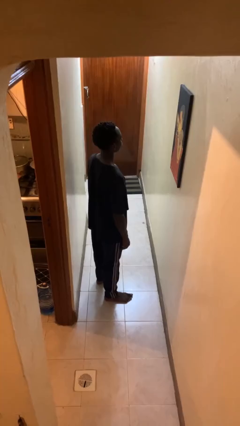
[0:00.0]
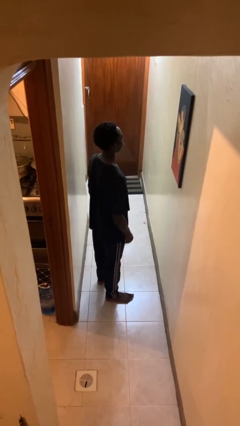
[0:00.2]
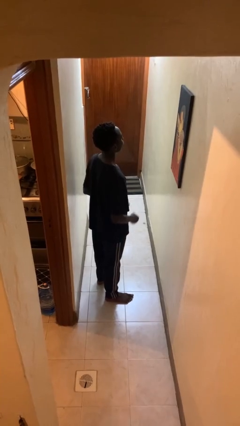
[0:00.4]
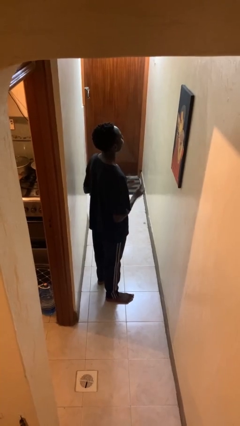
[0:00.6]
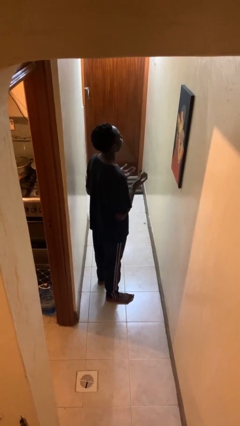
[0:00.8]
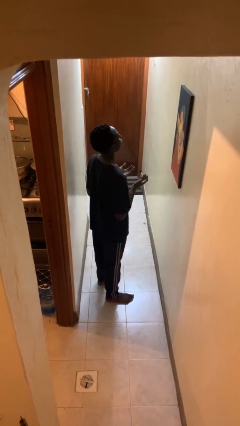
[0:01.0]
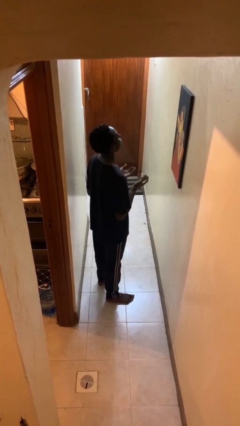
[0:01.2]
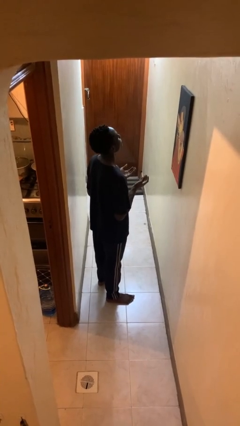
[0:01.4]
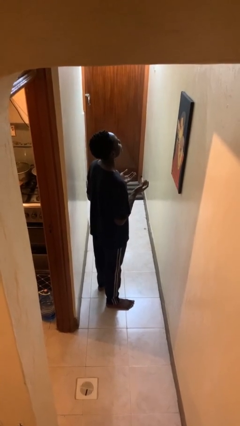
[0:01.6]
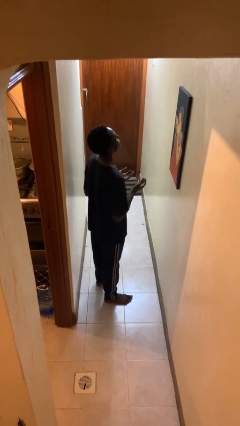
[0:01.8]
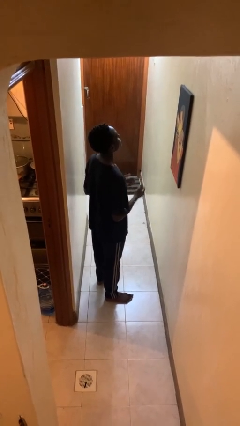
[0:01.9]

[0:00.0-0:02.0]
person prays

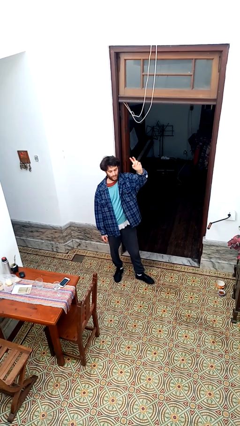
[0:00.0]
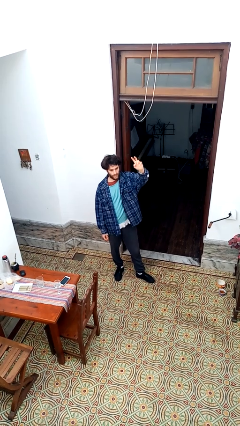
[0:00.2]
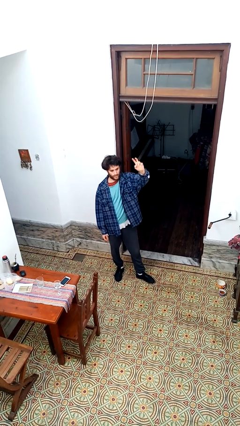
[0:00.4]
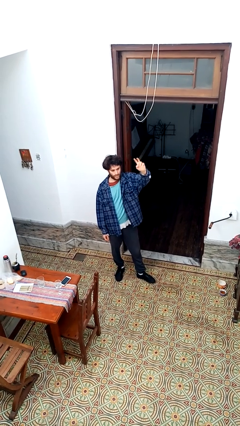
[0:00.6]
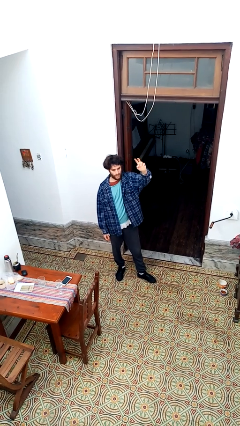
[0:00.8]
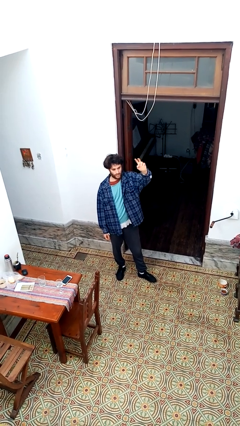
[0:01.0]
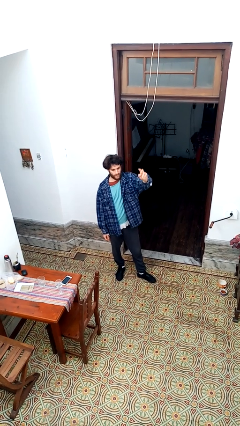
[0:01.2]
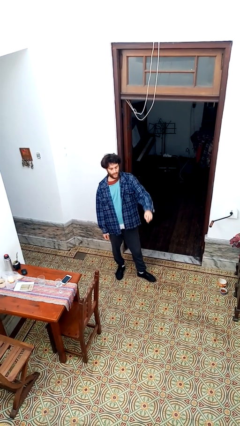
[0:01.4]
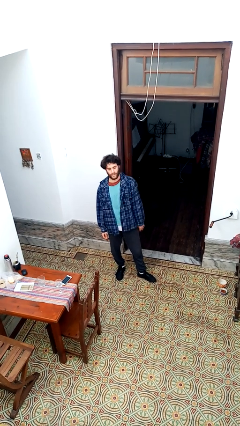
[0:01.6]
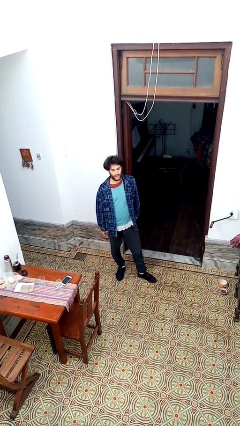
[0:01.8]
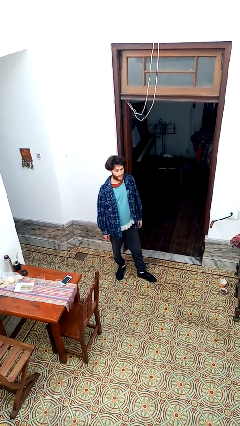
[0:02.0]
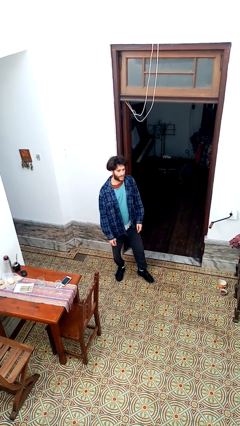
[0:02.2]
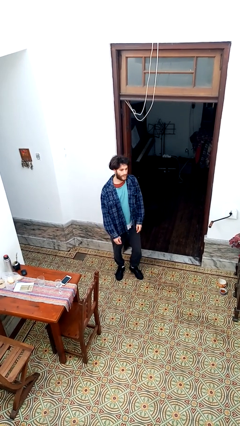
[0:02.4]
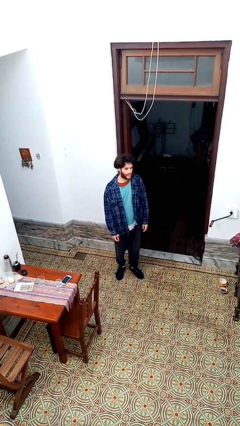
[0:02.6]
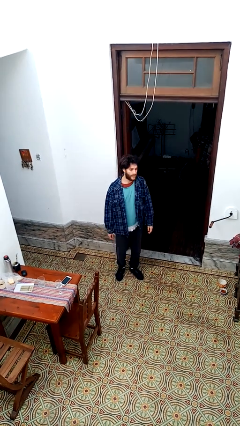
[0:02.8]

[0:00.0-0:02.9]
person gestures lower hand

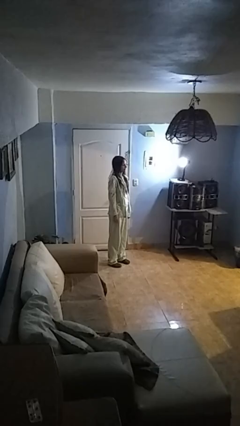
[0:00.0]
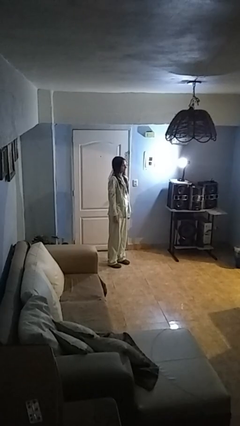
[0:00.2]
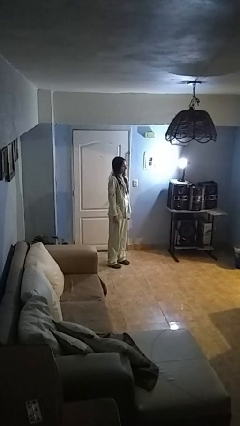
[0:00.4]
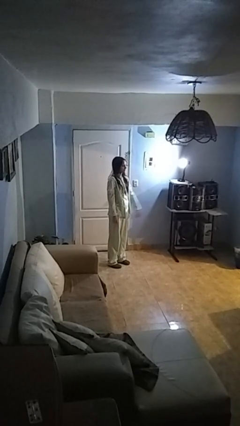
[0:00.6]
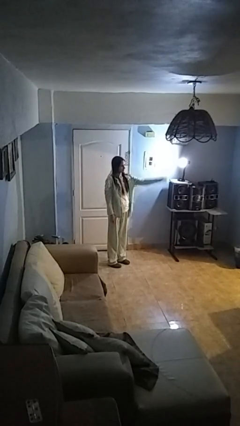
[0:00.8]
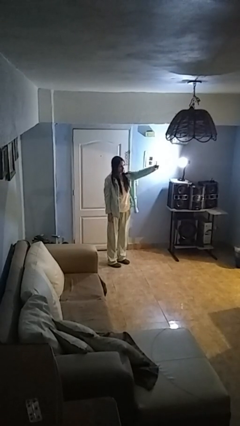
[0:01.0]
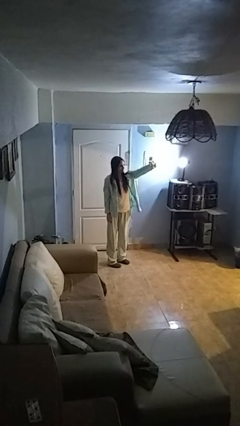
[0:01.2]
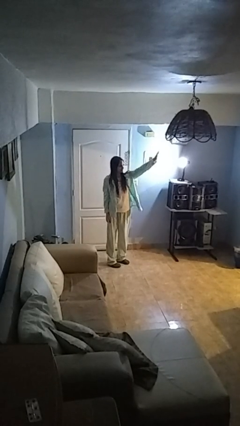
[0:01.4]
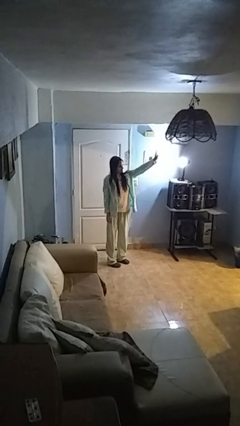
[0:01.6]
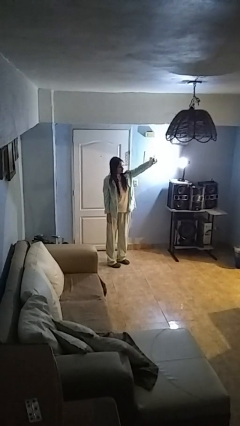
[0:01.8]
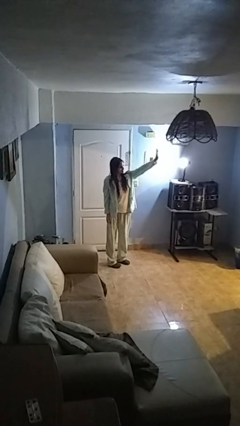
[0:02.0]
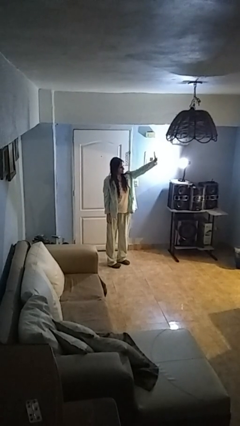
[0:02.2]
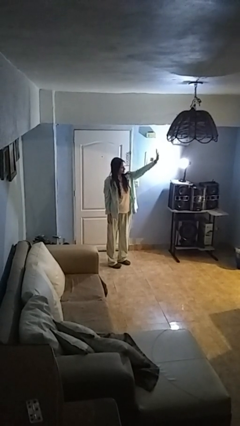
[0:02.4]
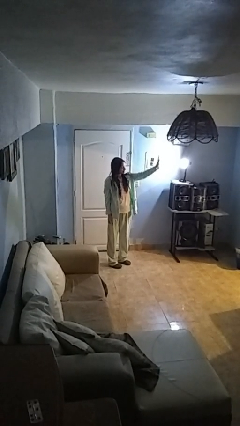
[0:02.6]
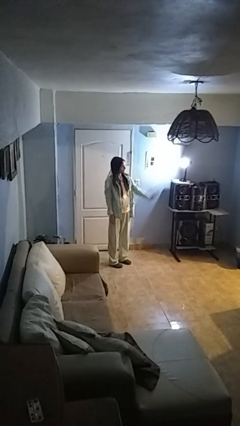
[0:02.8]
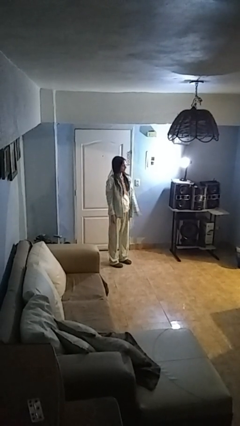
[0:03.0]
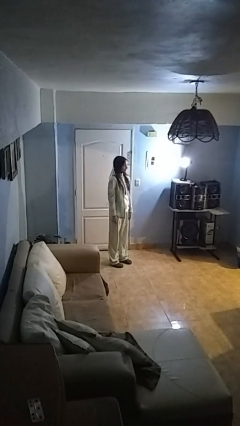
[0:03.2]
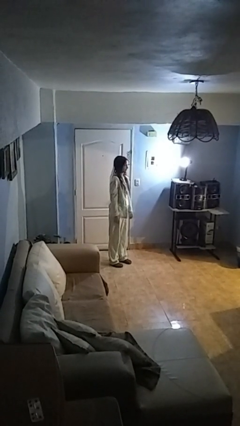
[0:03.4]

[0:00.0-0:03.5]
person waves at person

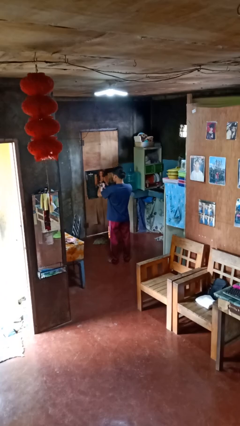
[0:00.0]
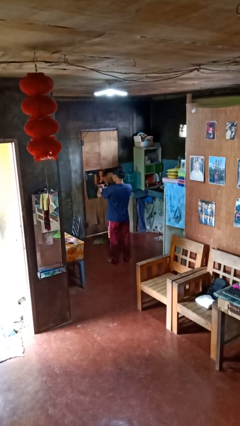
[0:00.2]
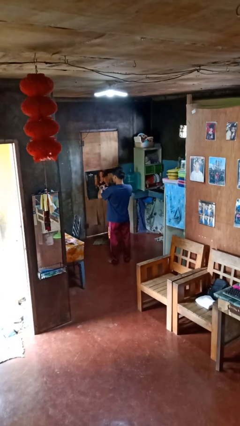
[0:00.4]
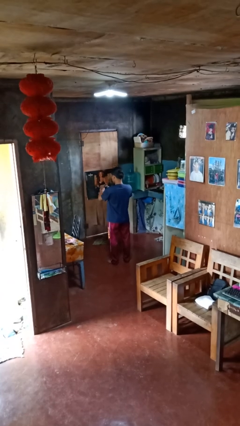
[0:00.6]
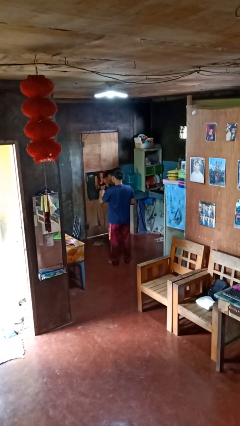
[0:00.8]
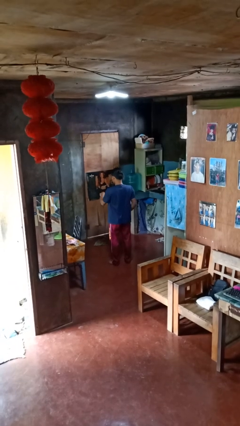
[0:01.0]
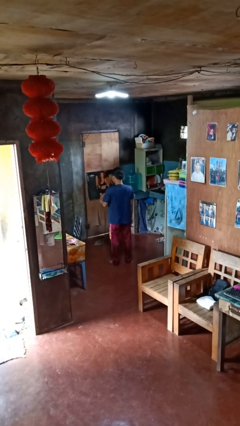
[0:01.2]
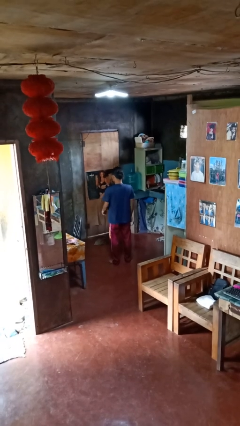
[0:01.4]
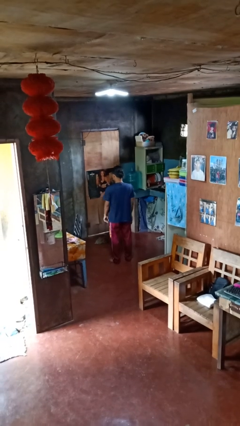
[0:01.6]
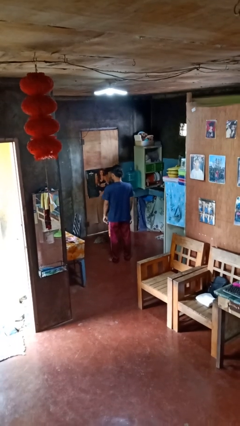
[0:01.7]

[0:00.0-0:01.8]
person takes off wristwatch

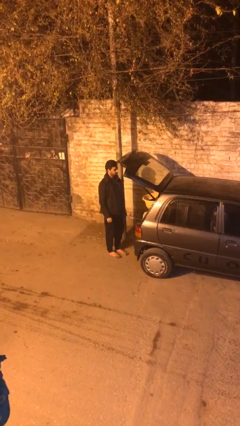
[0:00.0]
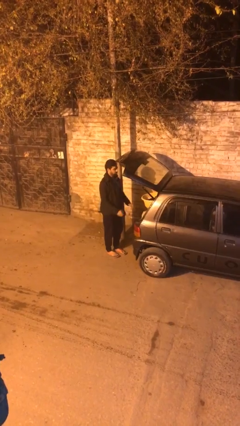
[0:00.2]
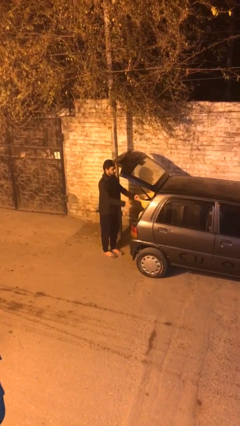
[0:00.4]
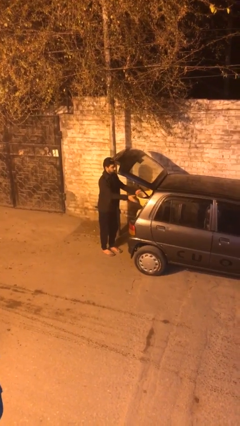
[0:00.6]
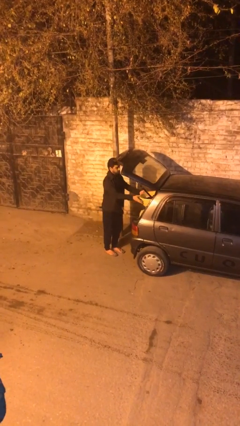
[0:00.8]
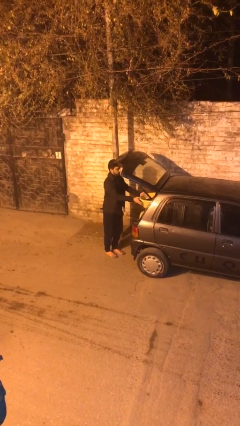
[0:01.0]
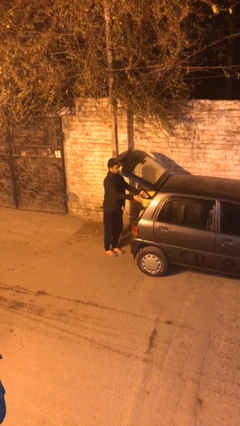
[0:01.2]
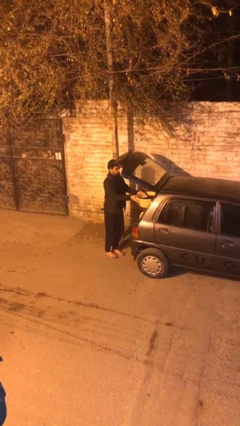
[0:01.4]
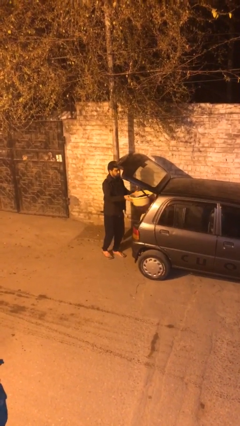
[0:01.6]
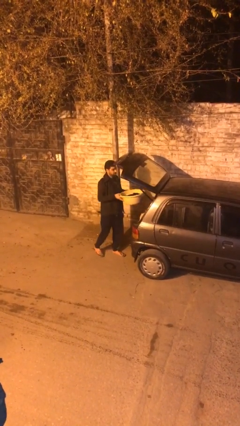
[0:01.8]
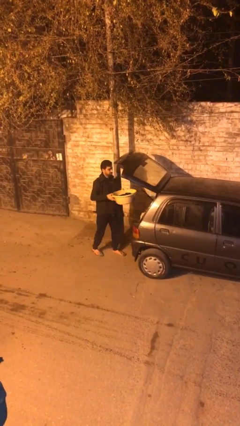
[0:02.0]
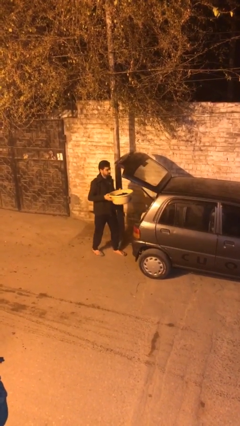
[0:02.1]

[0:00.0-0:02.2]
person unloads car

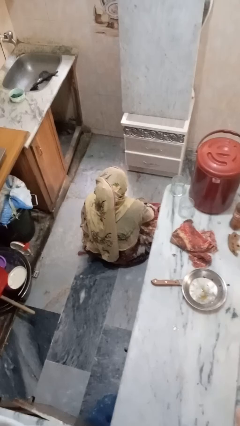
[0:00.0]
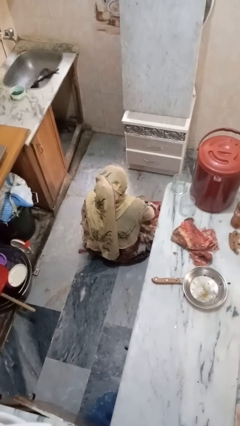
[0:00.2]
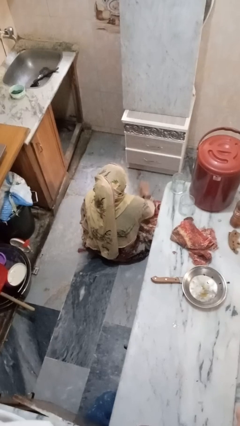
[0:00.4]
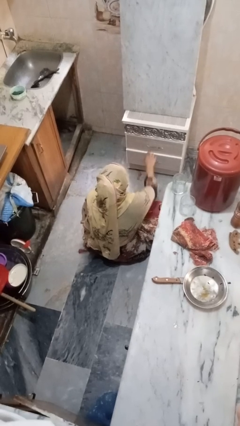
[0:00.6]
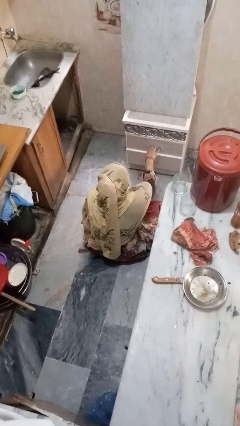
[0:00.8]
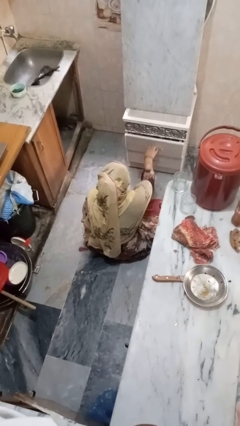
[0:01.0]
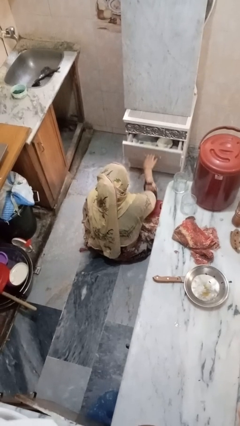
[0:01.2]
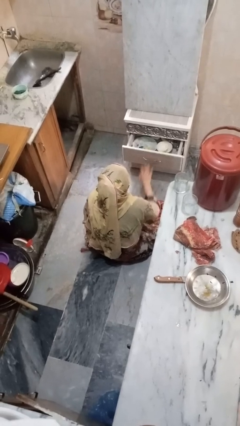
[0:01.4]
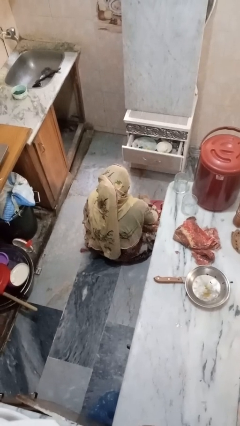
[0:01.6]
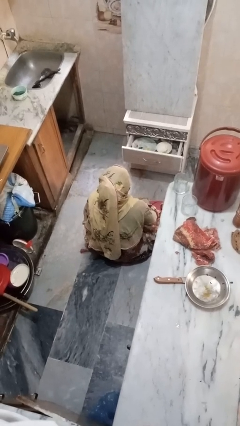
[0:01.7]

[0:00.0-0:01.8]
person opens kitchen drawer

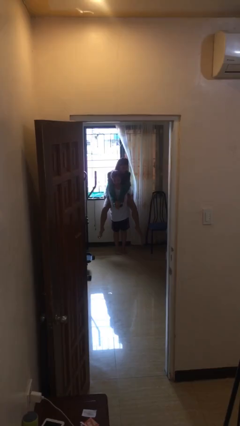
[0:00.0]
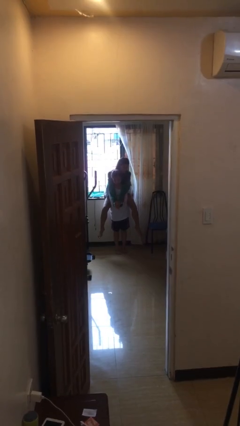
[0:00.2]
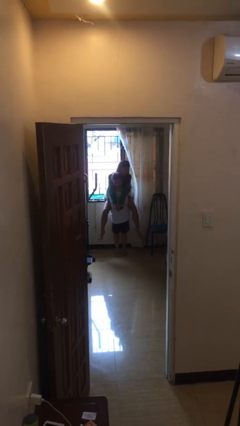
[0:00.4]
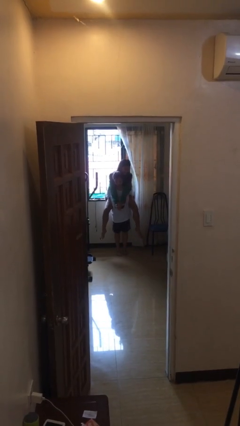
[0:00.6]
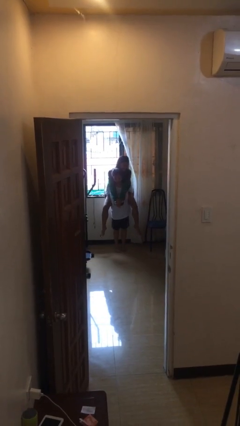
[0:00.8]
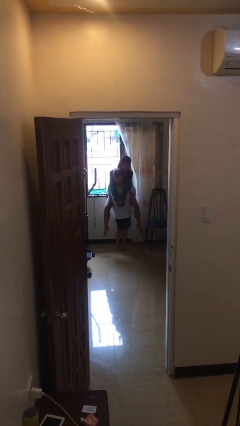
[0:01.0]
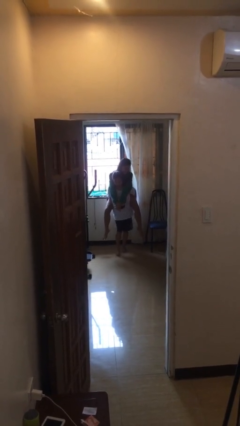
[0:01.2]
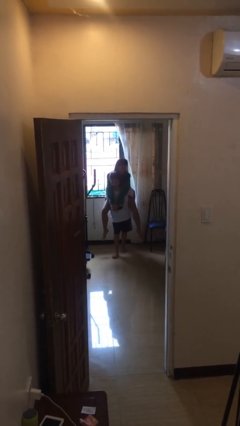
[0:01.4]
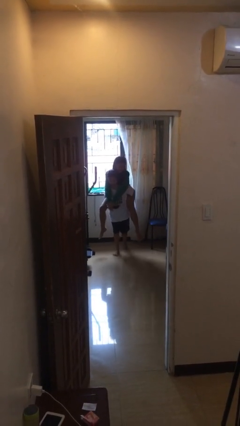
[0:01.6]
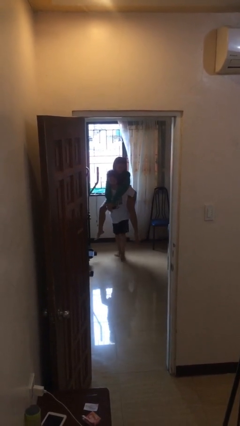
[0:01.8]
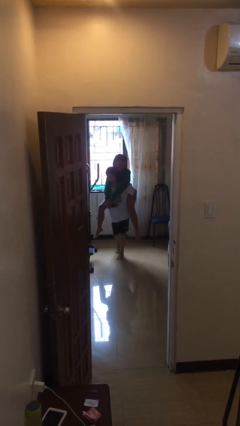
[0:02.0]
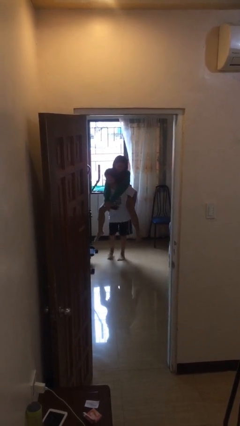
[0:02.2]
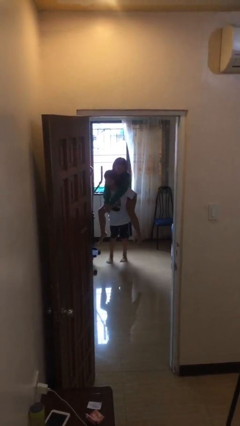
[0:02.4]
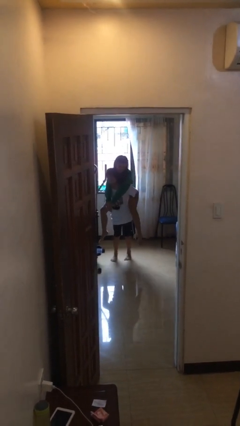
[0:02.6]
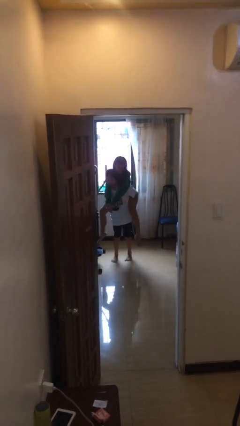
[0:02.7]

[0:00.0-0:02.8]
person carries person on shoulders

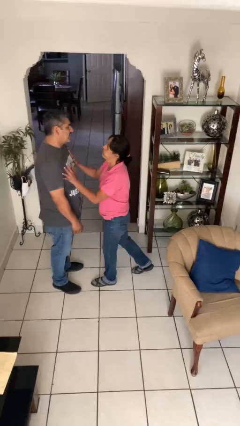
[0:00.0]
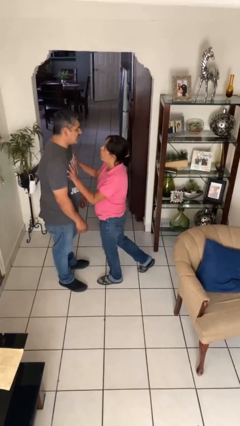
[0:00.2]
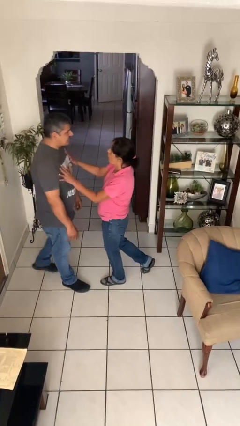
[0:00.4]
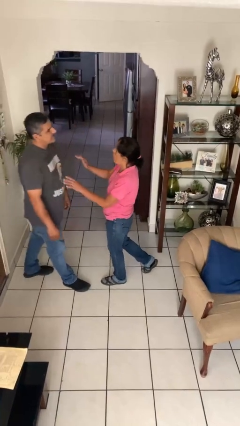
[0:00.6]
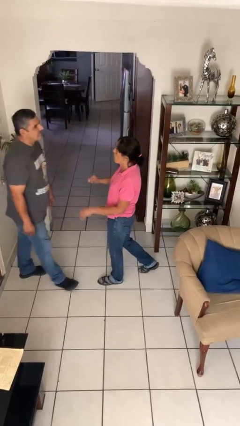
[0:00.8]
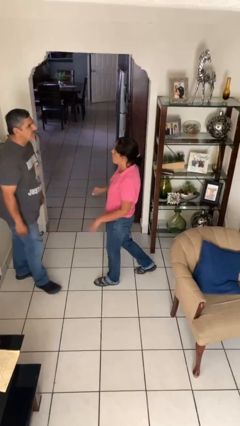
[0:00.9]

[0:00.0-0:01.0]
person shoves person
